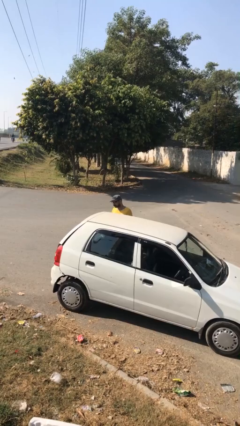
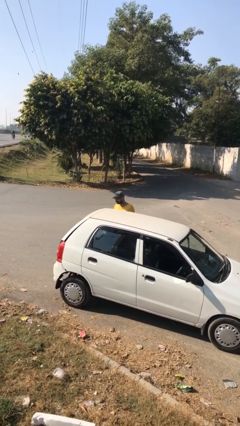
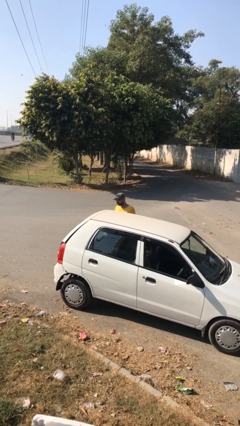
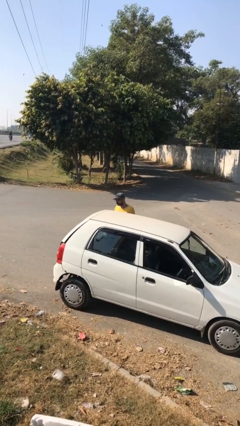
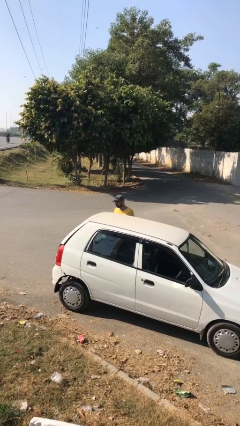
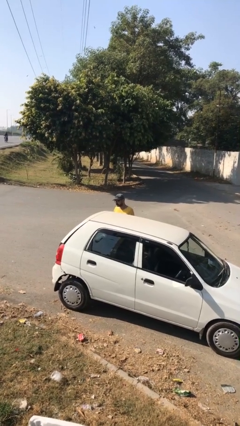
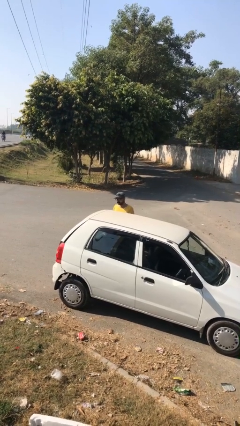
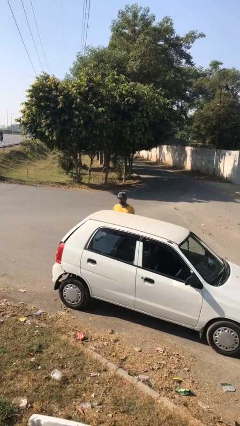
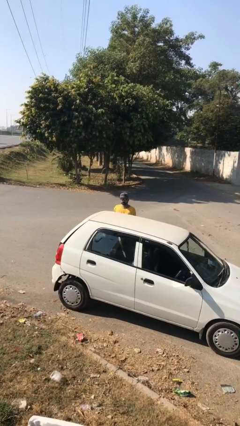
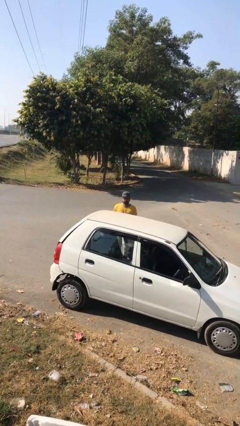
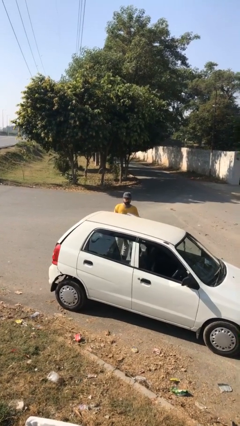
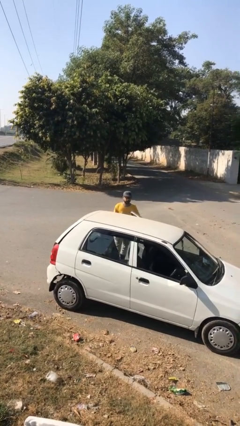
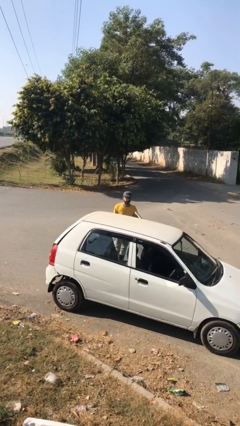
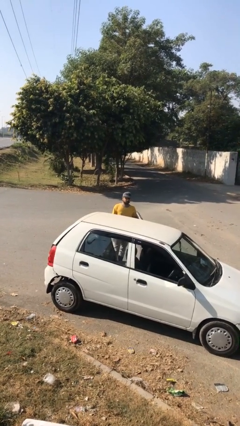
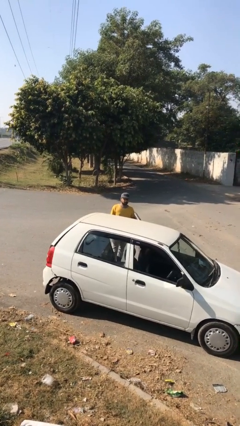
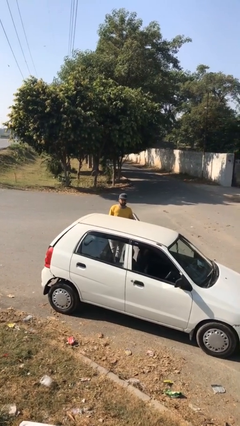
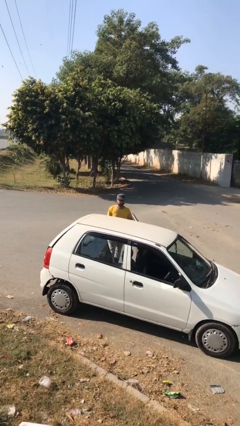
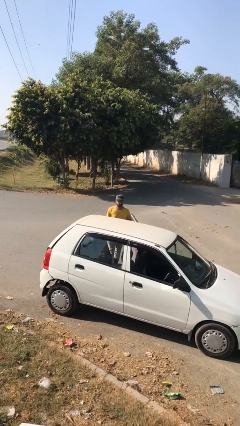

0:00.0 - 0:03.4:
person opens car door

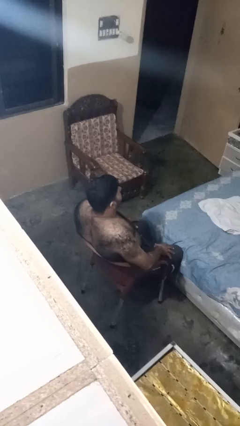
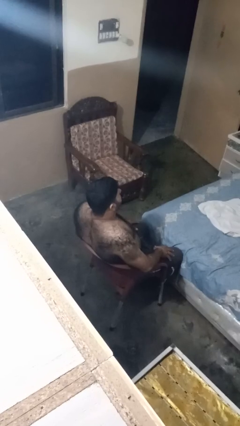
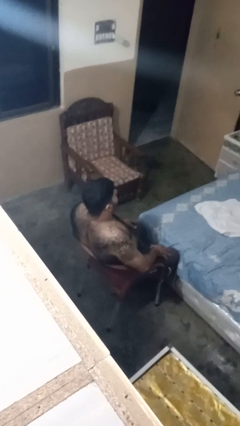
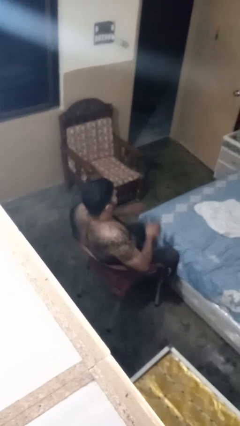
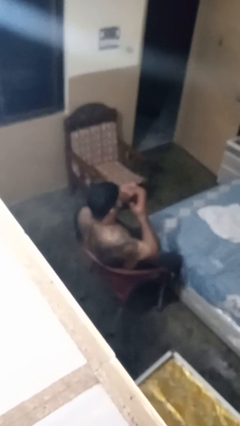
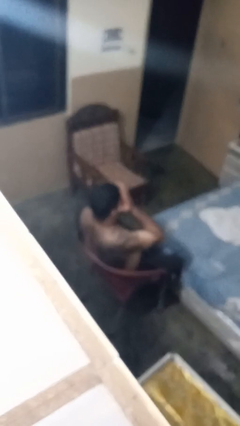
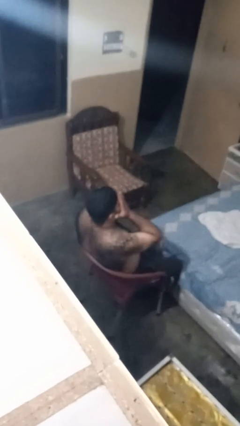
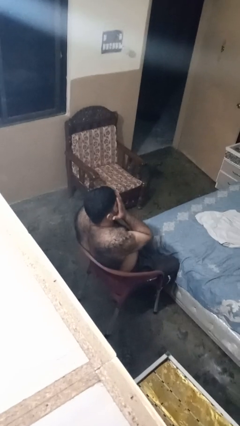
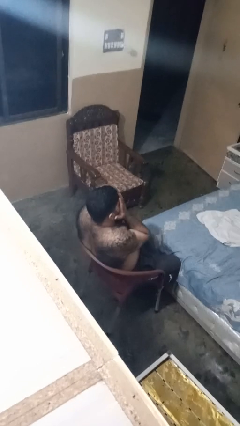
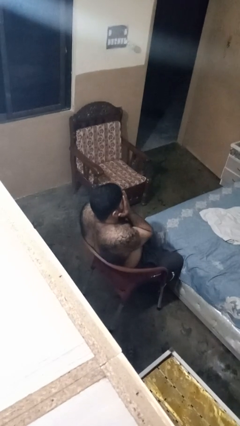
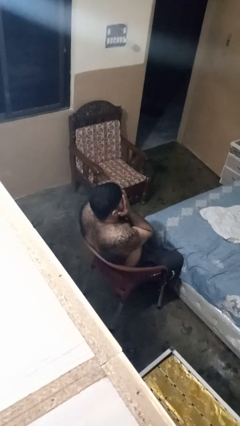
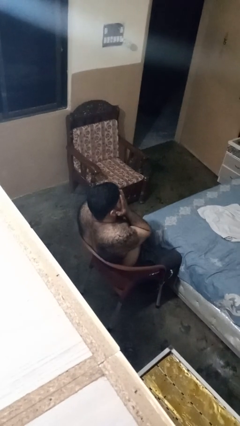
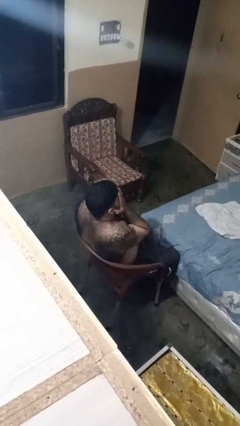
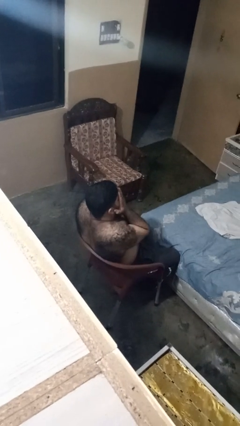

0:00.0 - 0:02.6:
person covers face with hands

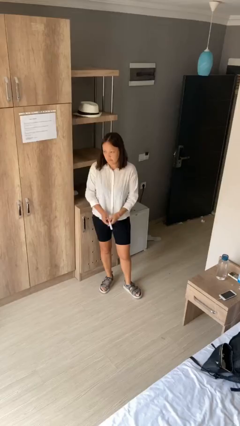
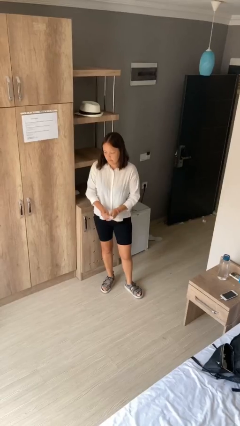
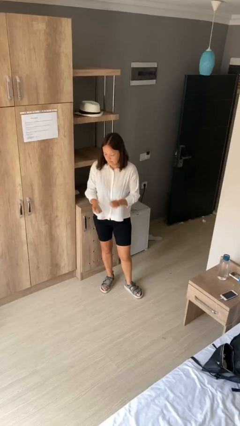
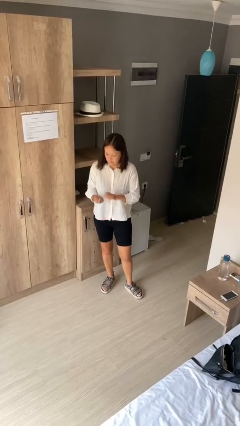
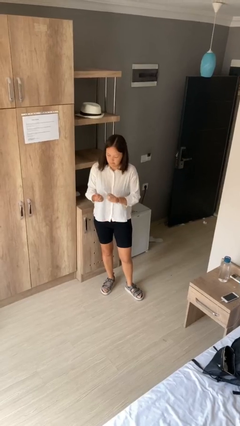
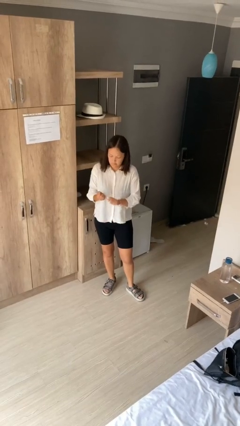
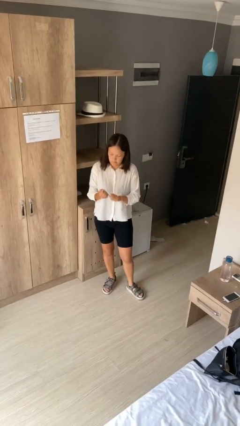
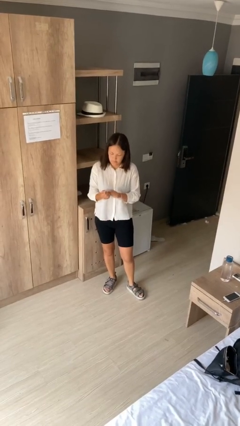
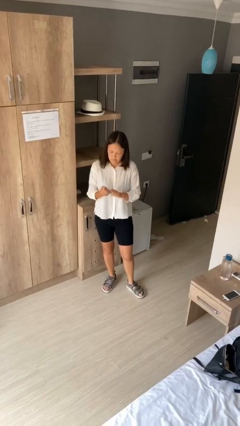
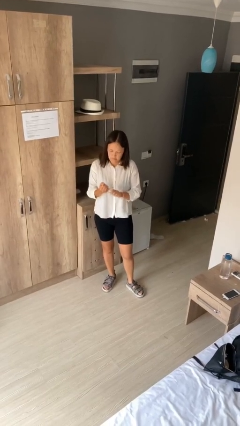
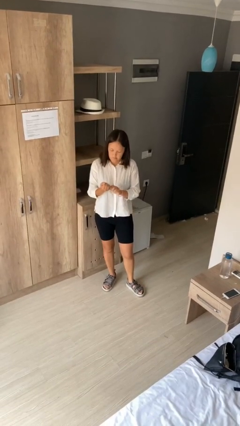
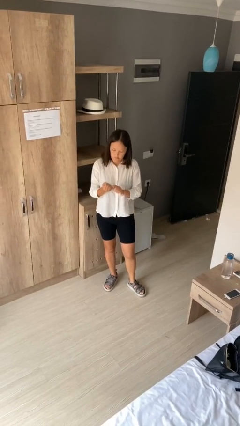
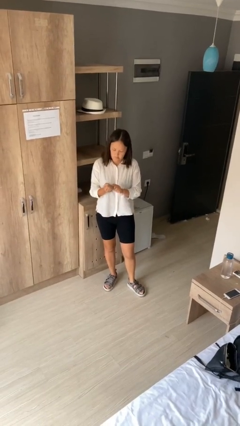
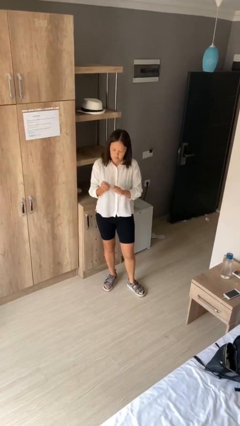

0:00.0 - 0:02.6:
person files fingernails

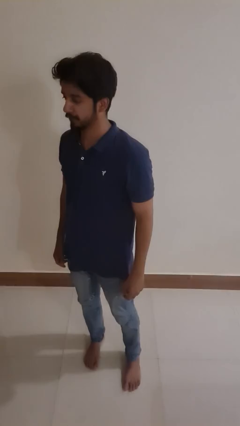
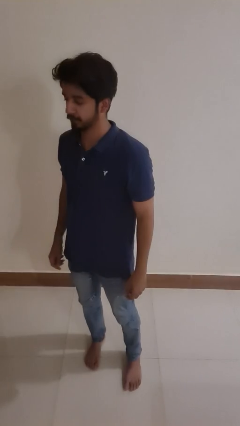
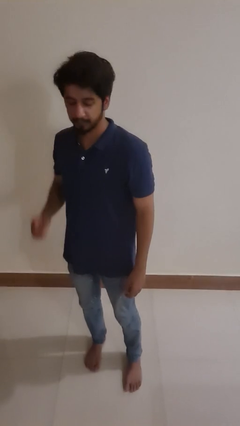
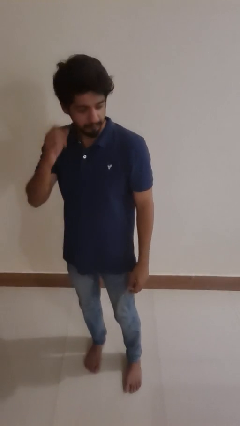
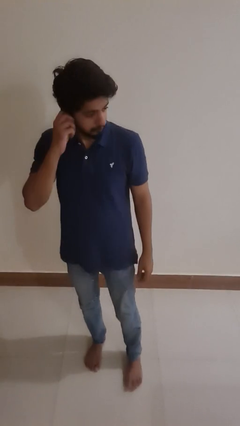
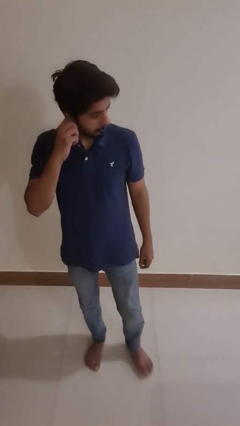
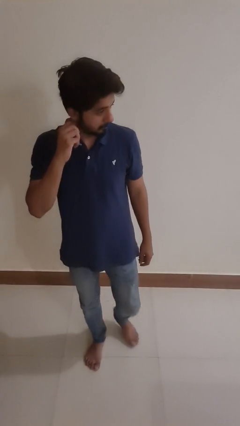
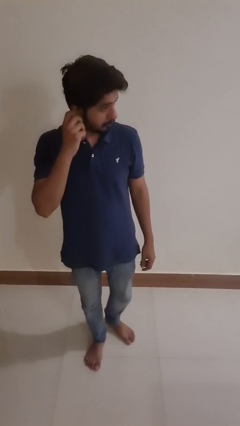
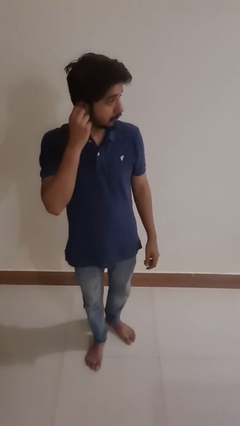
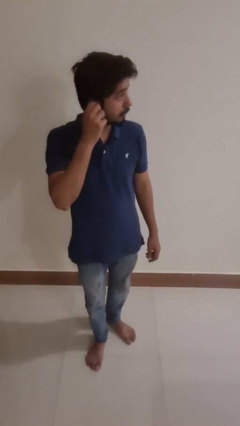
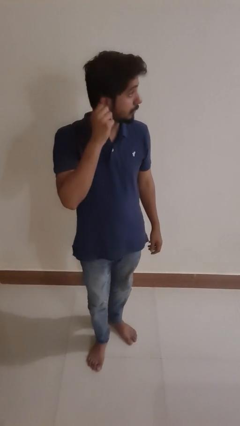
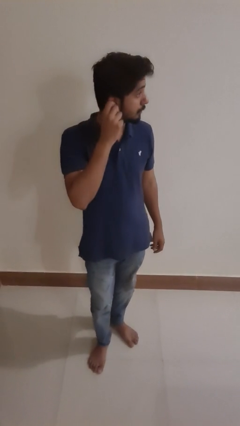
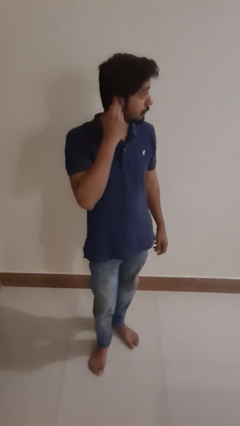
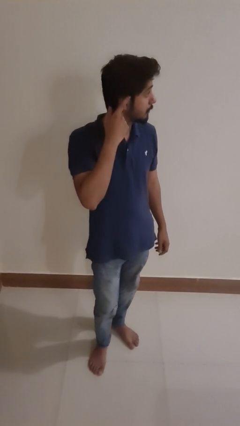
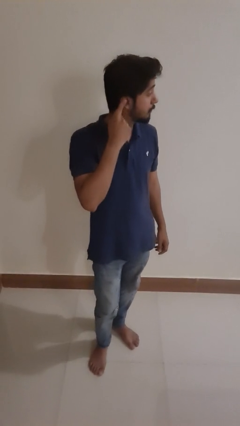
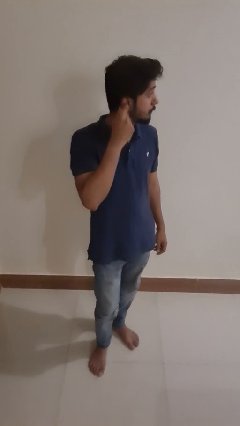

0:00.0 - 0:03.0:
person touches earlobe

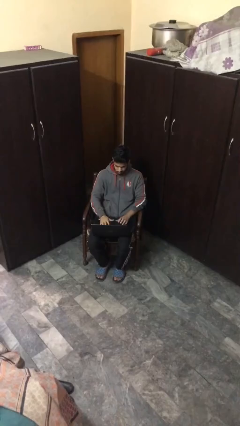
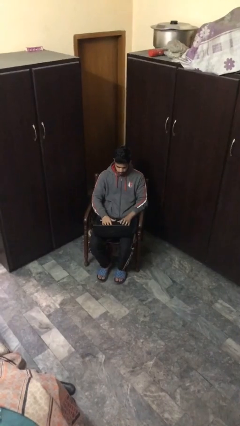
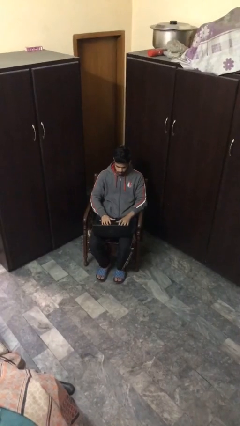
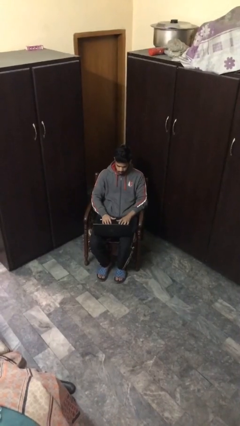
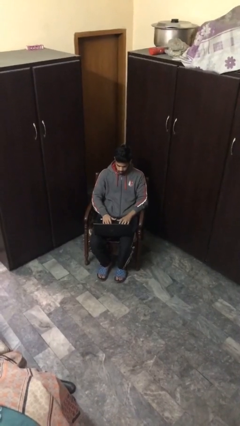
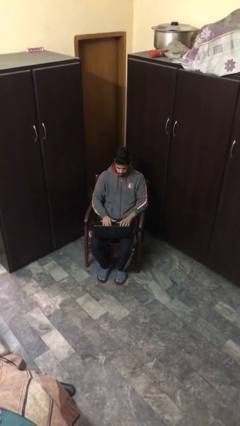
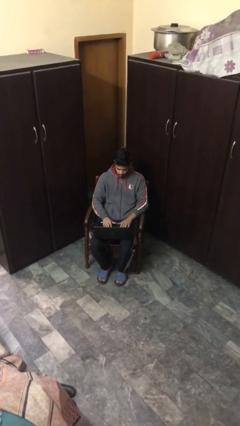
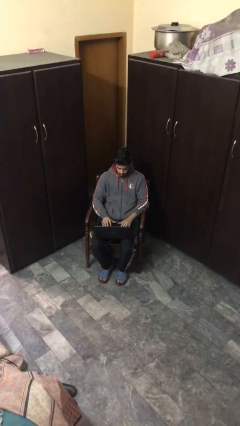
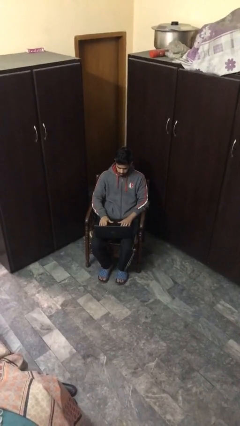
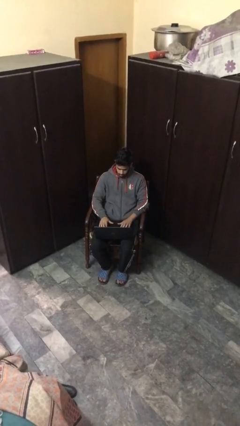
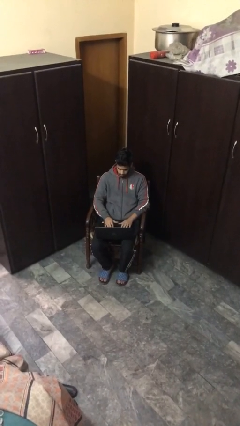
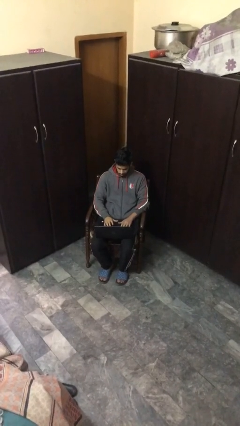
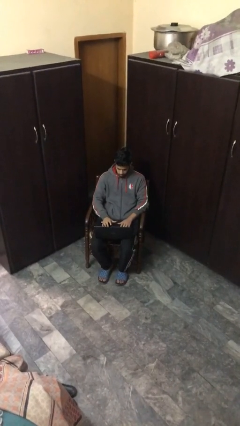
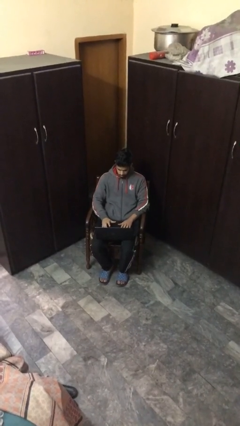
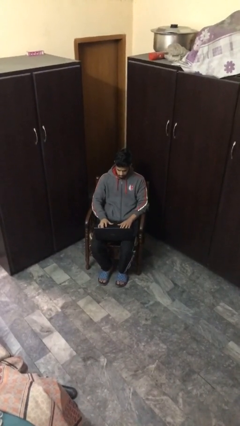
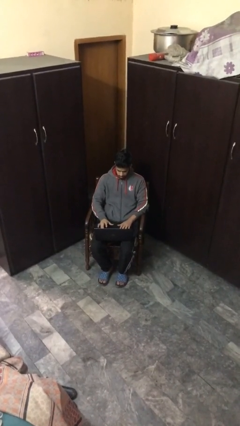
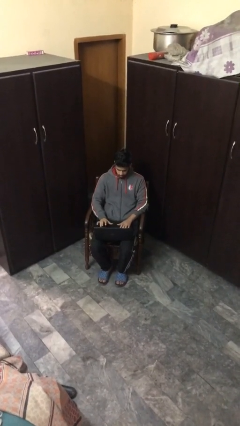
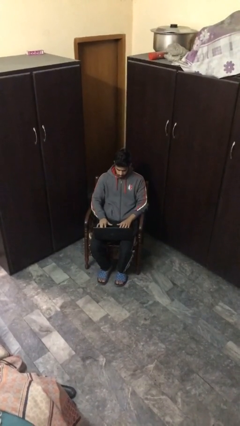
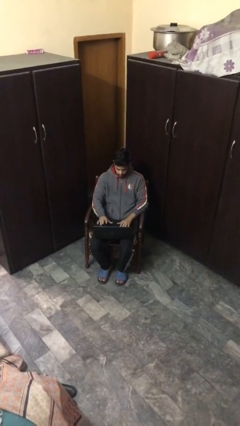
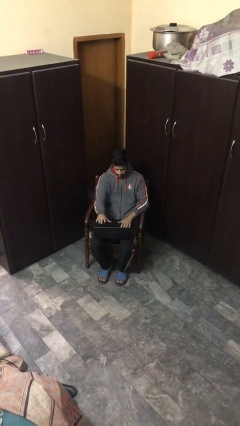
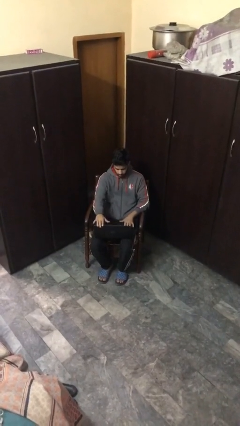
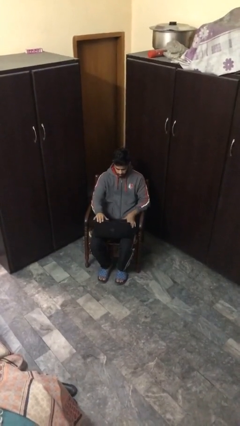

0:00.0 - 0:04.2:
person interacts with laptop

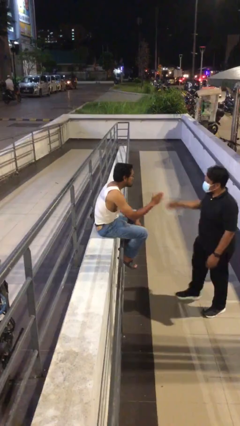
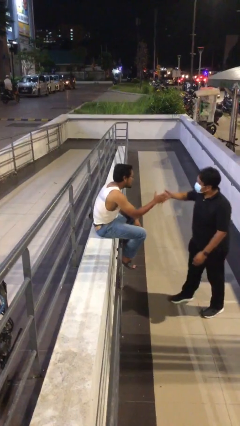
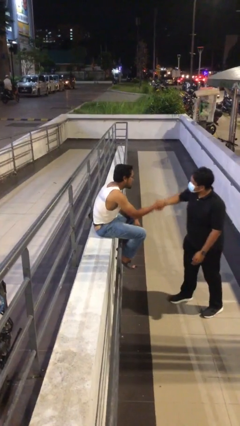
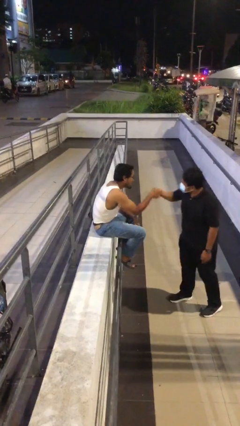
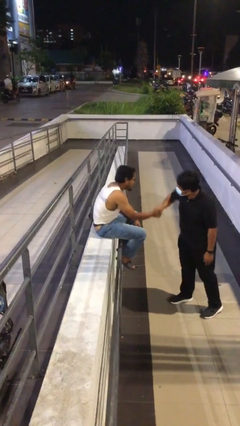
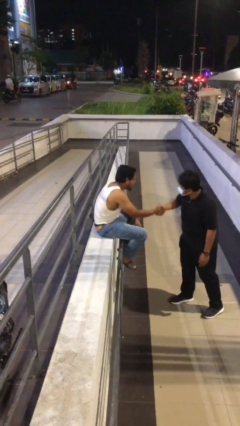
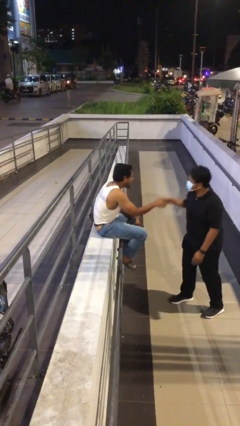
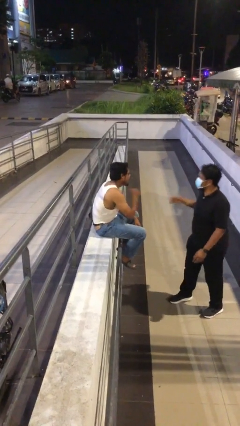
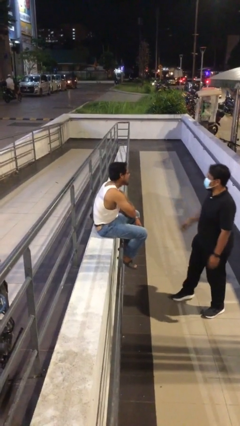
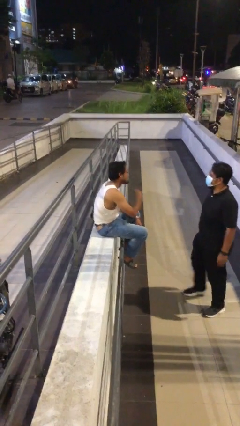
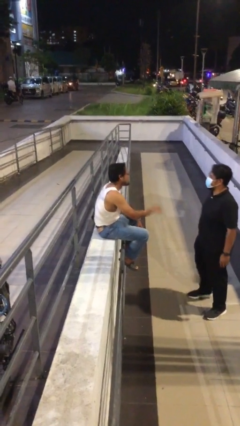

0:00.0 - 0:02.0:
person shakes hand
